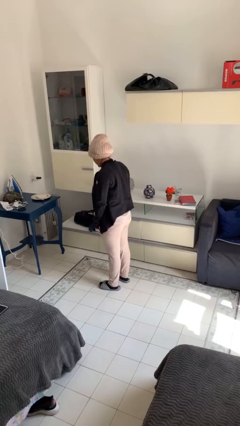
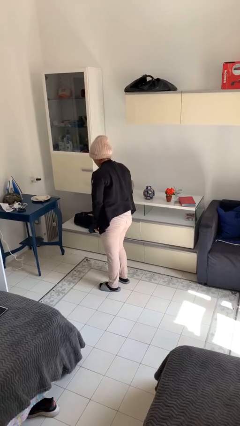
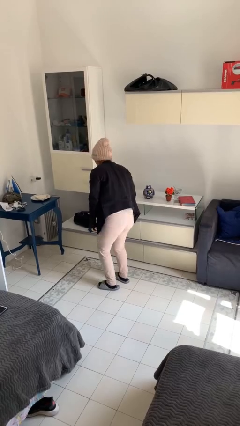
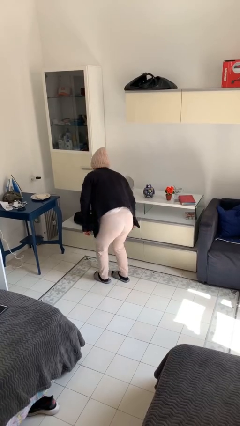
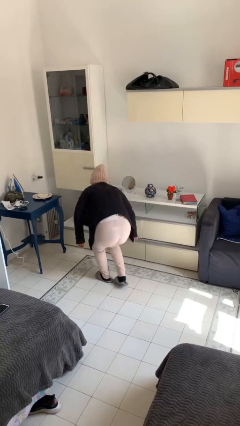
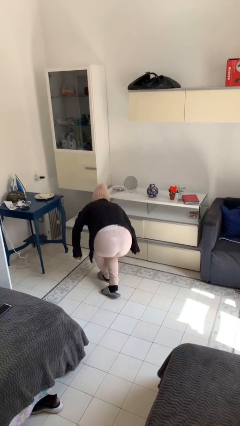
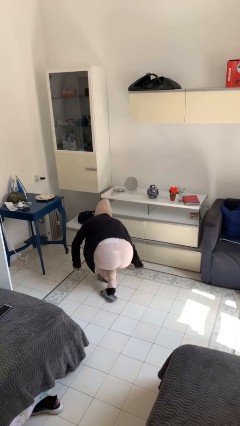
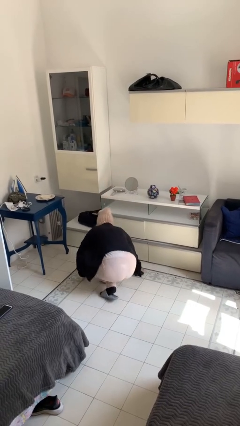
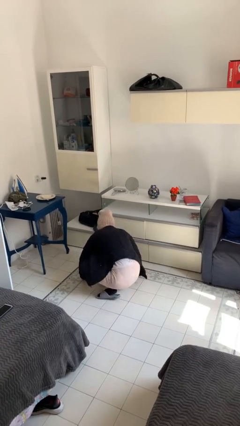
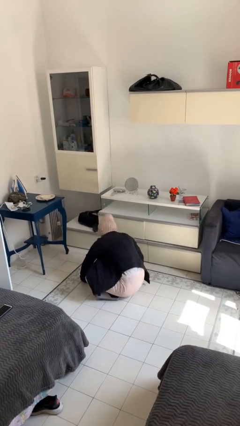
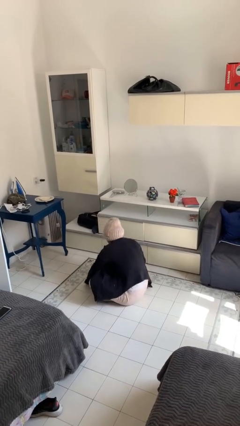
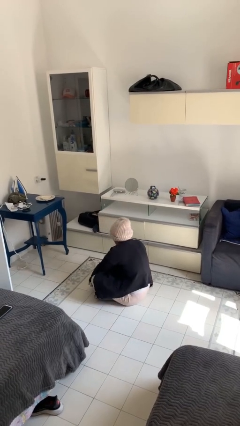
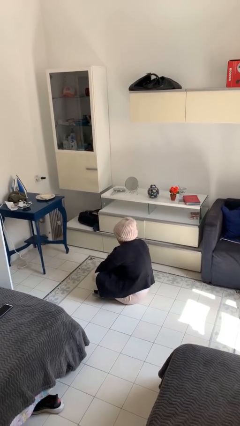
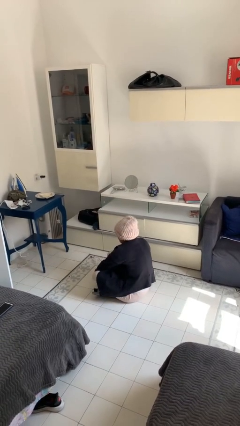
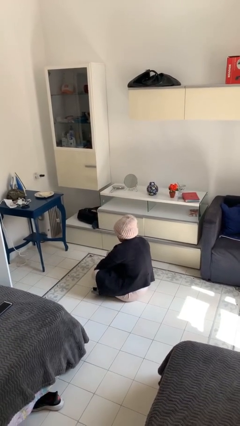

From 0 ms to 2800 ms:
person sits crisscross

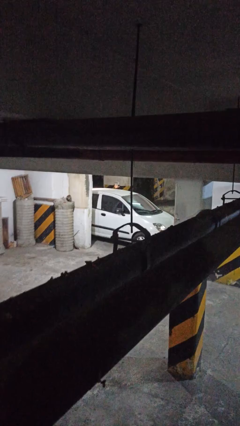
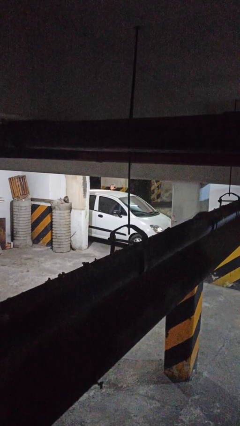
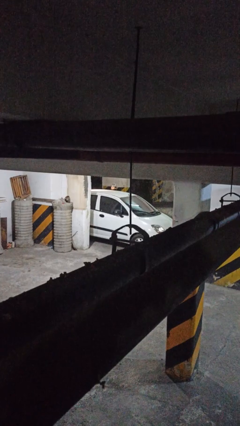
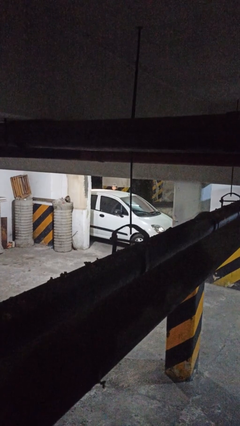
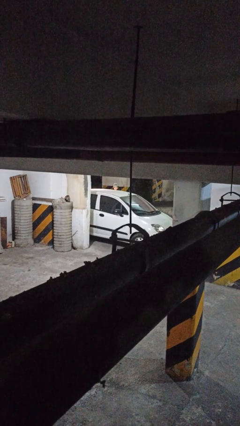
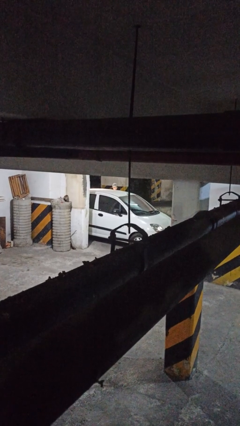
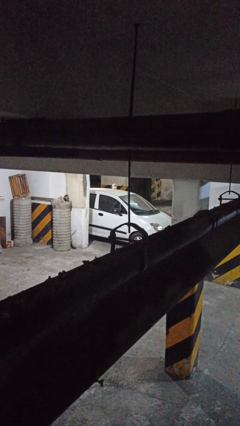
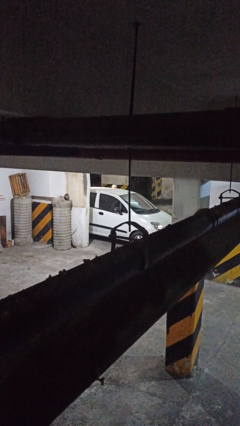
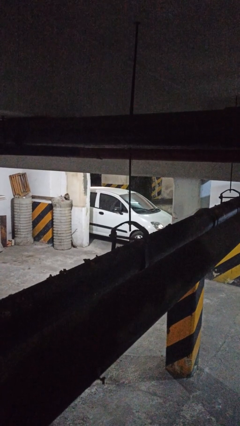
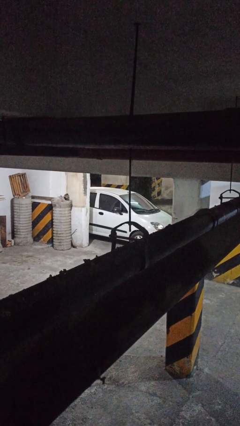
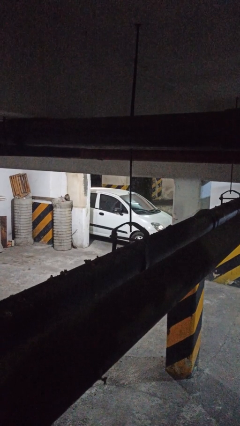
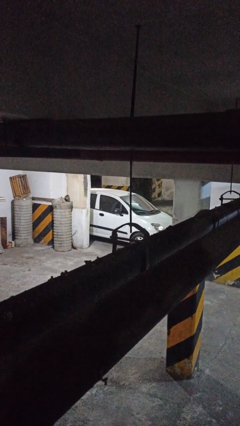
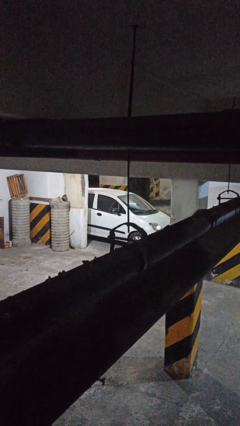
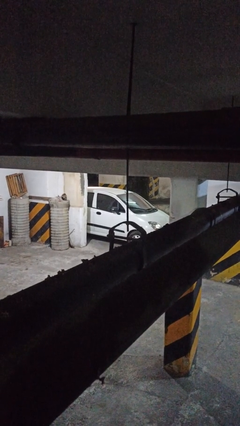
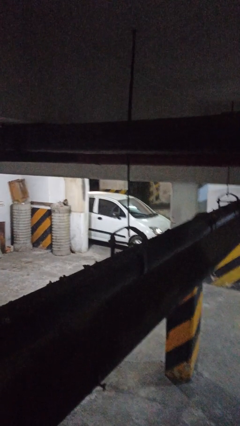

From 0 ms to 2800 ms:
car picks up person

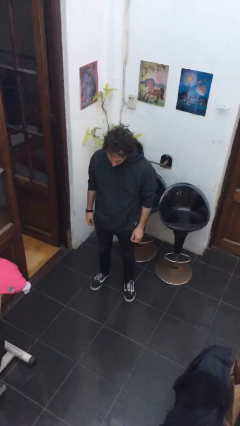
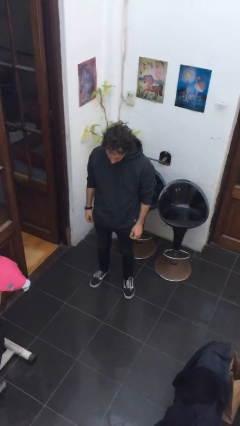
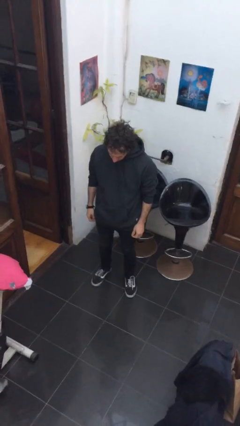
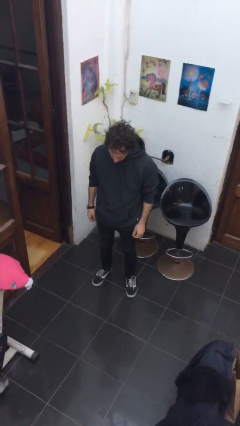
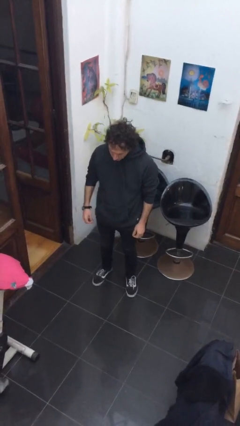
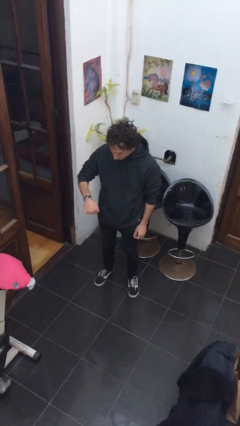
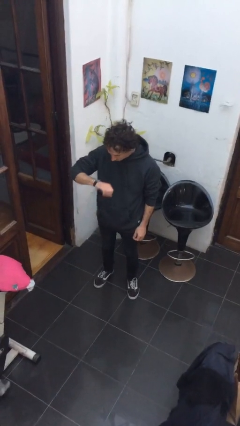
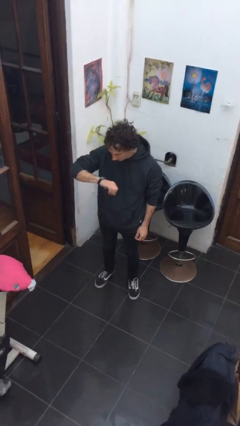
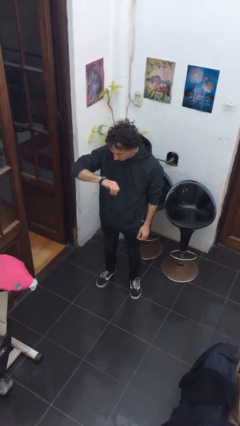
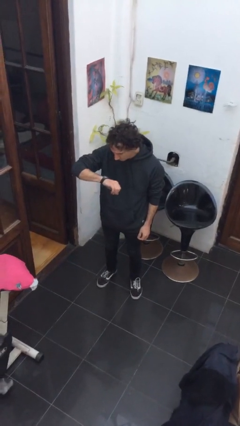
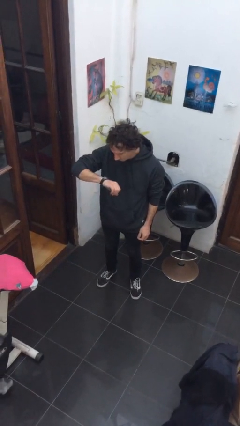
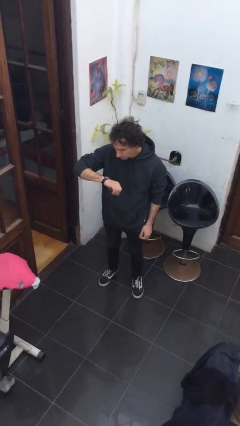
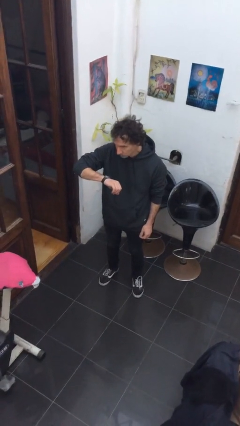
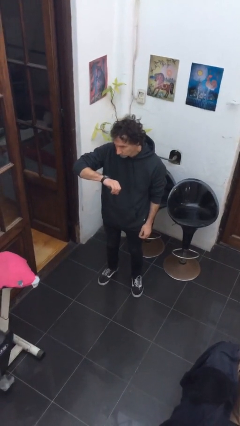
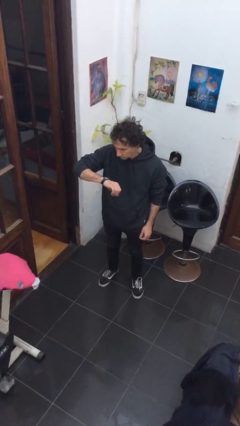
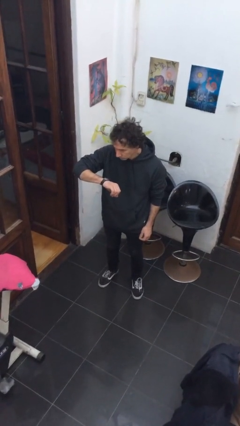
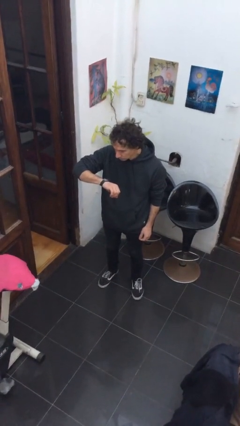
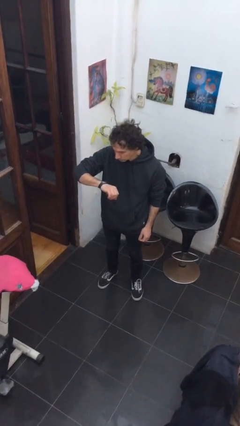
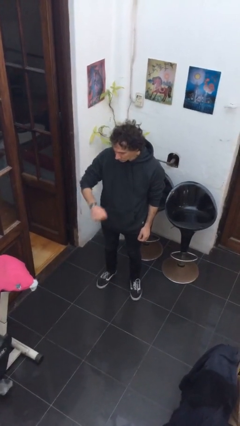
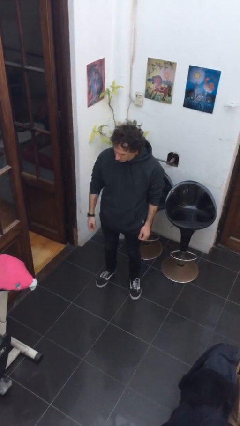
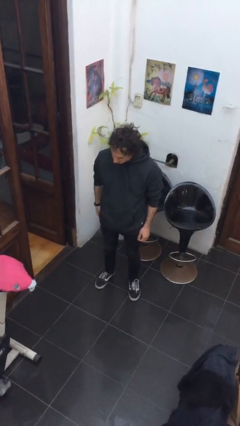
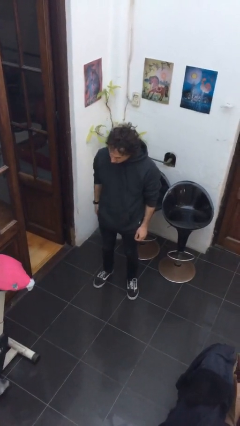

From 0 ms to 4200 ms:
person looks at wristwatch

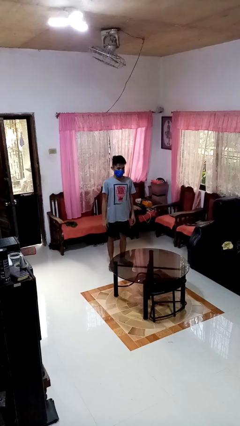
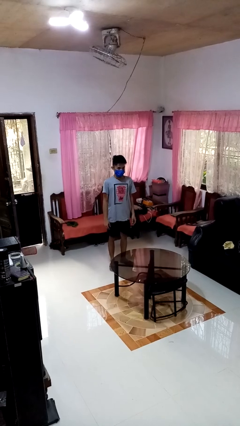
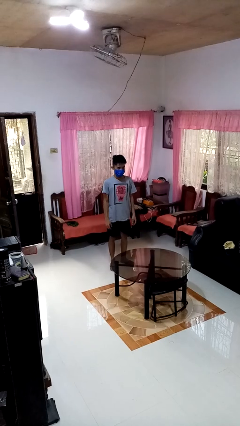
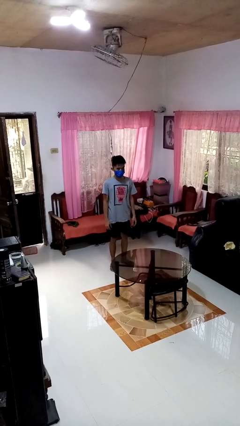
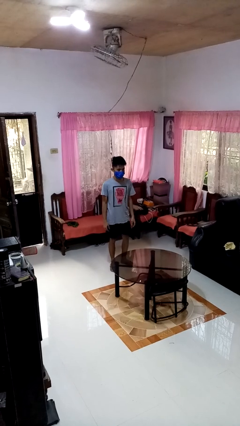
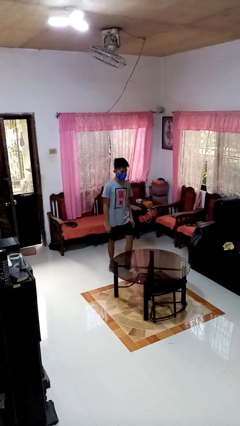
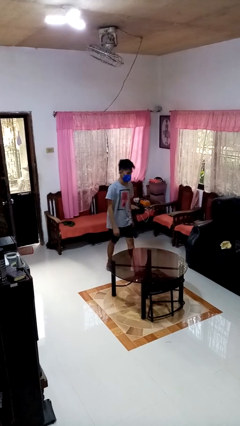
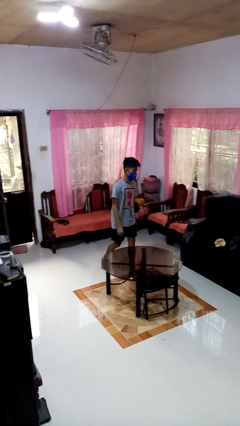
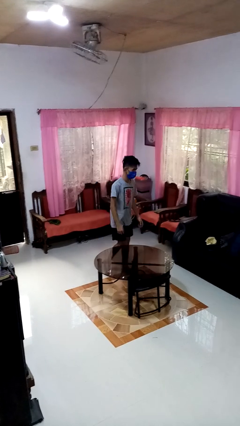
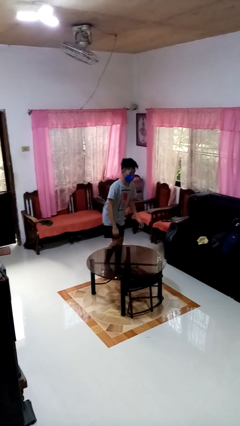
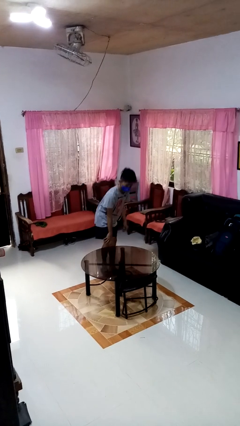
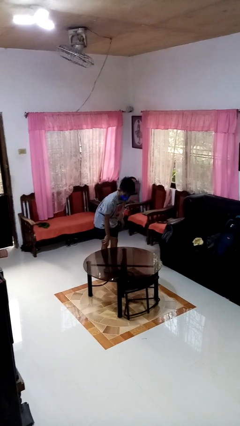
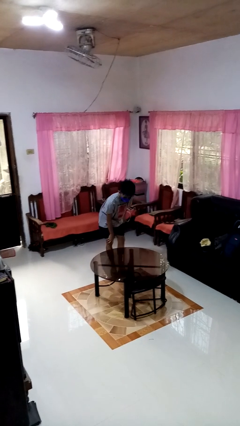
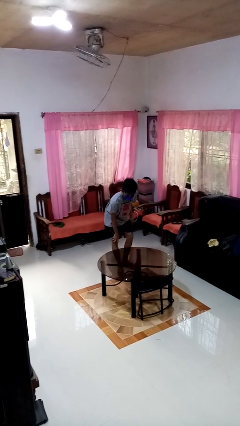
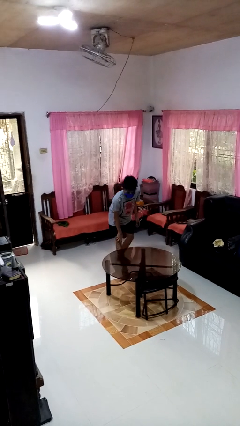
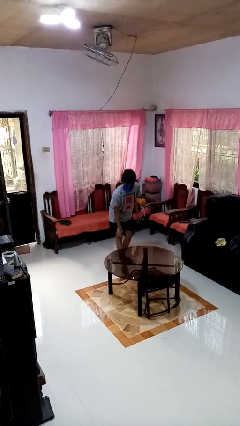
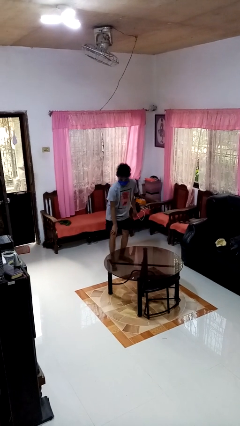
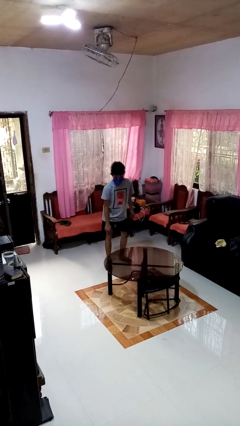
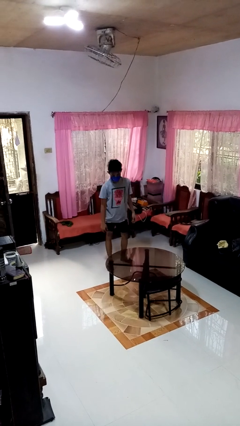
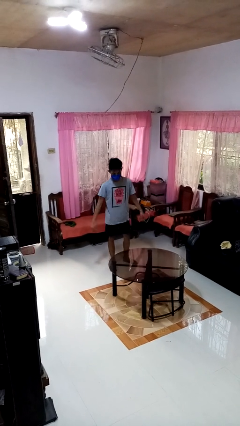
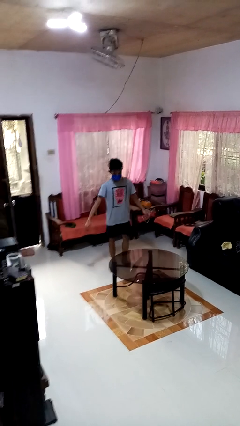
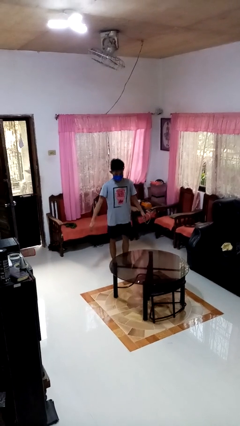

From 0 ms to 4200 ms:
person bumps into table

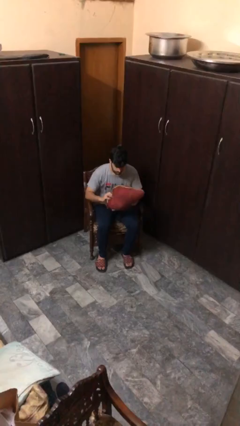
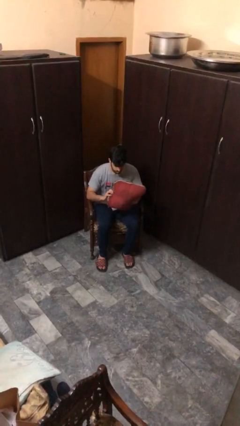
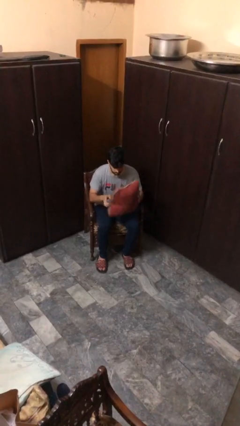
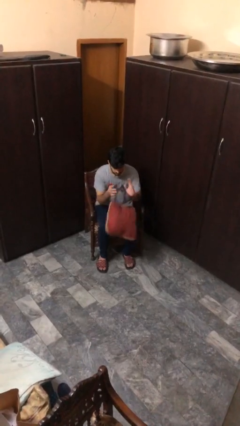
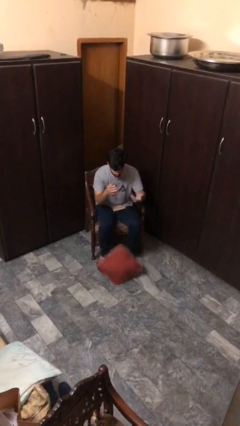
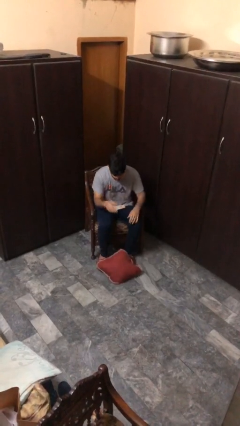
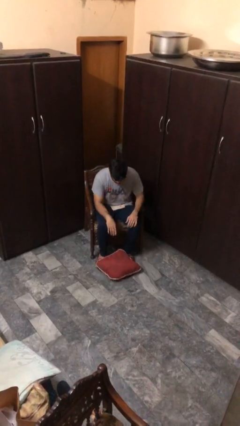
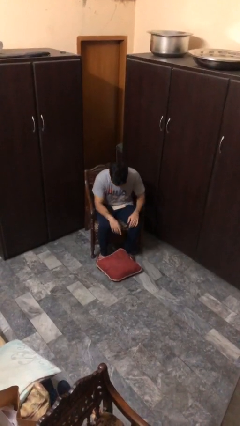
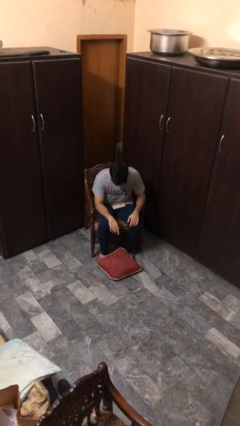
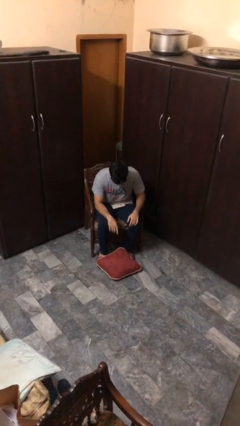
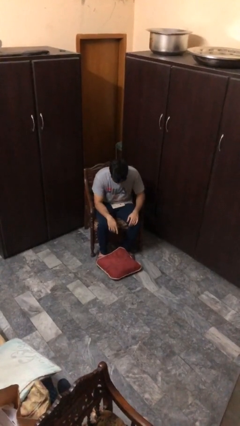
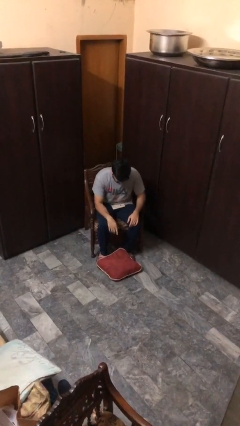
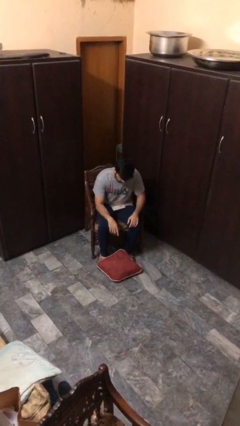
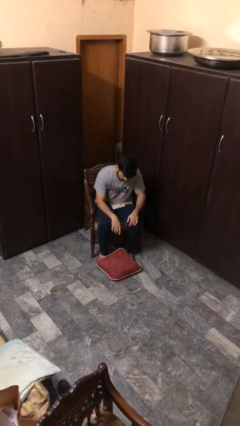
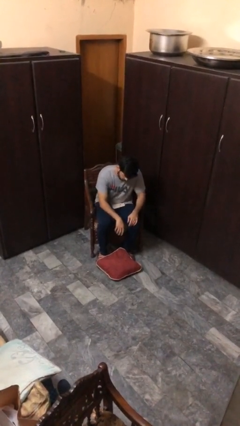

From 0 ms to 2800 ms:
person drops object

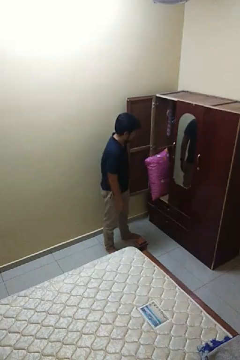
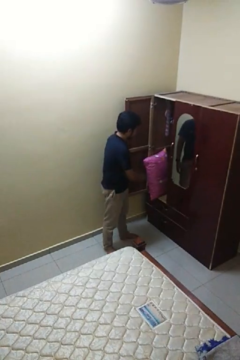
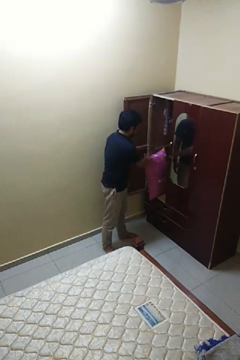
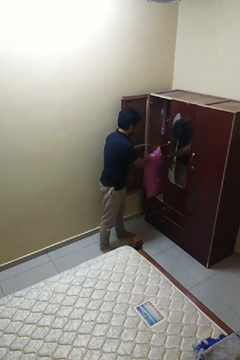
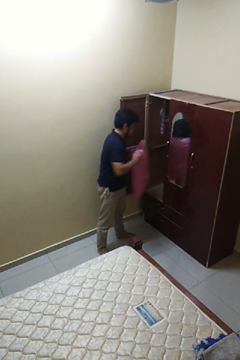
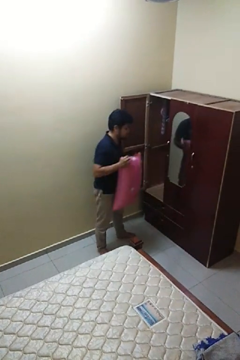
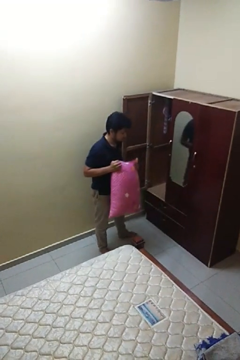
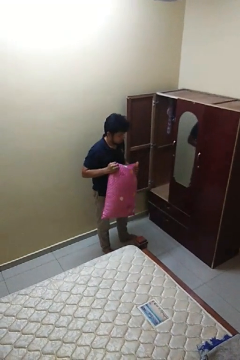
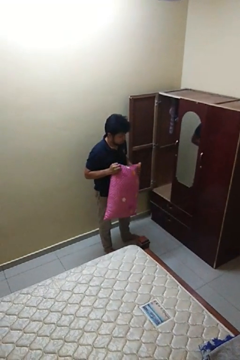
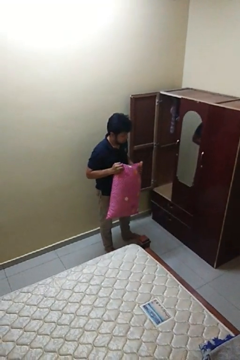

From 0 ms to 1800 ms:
person picks up object from cabinet
